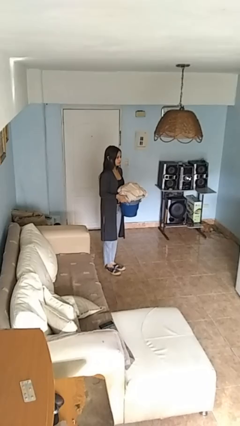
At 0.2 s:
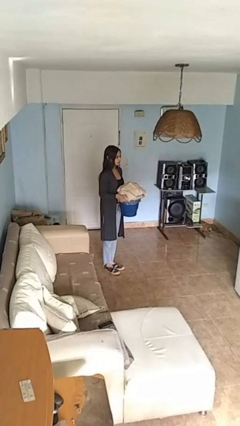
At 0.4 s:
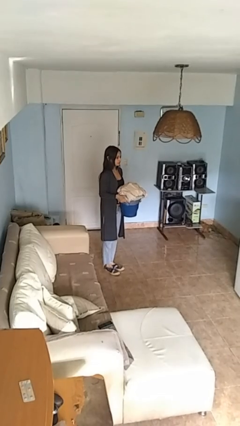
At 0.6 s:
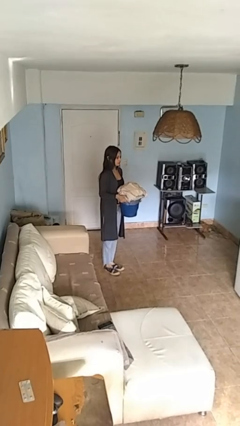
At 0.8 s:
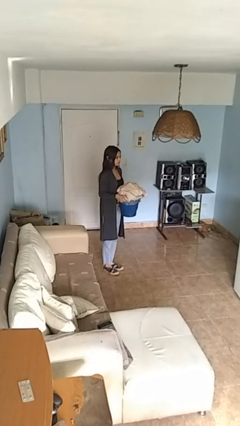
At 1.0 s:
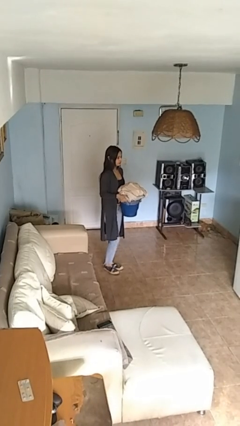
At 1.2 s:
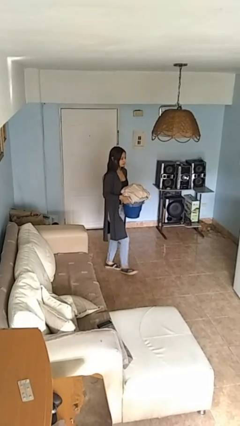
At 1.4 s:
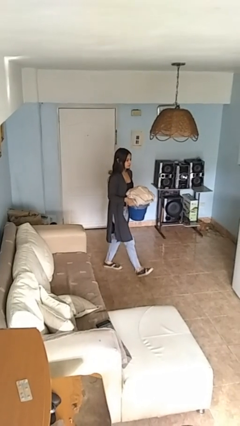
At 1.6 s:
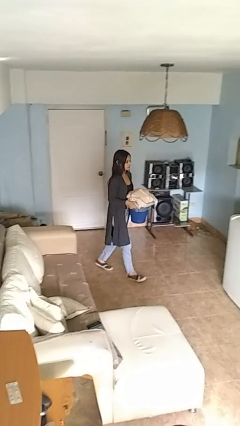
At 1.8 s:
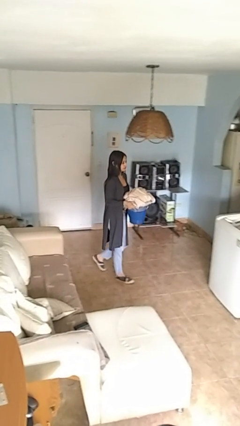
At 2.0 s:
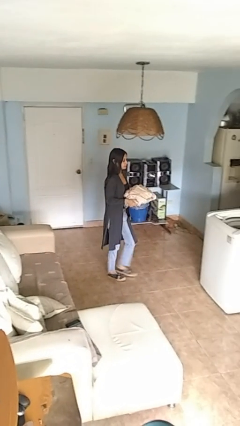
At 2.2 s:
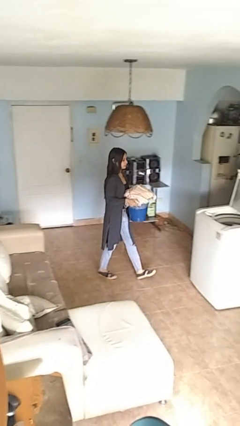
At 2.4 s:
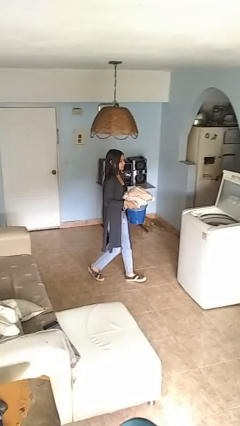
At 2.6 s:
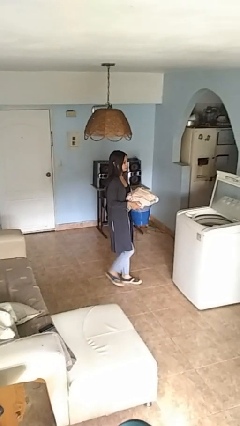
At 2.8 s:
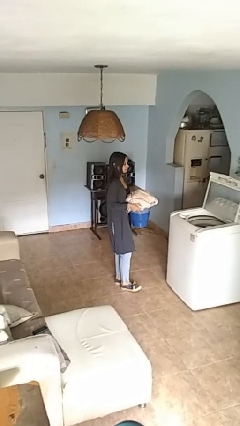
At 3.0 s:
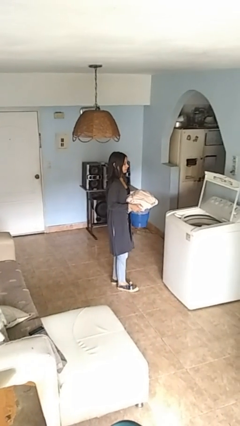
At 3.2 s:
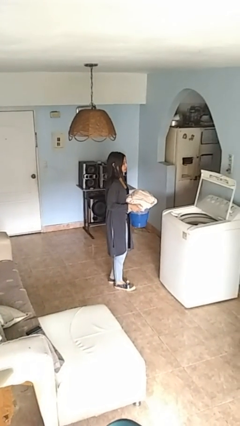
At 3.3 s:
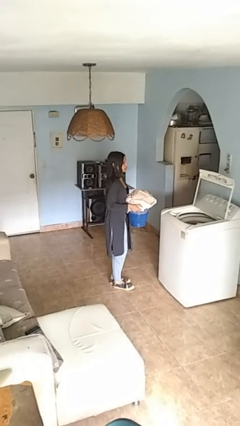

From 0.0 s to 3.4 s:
person carries laundry basket

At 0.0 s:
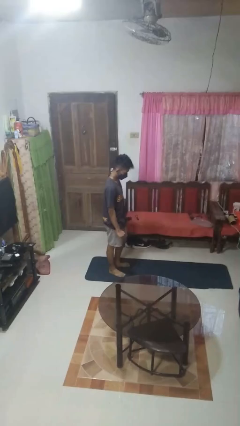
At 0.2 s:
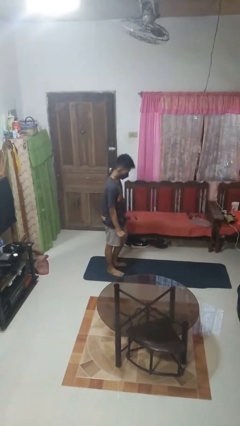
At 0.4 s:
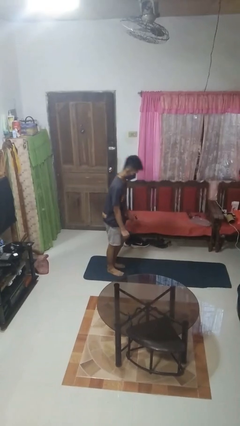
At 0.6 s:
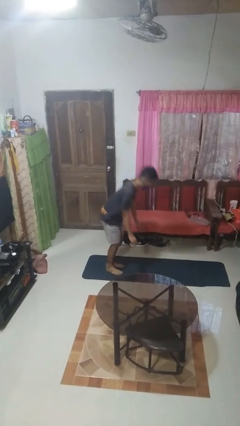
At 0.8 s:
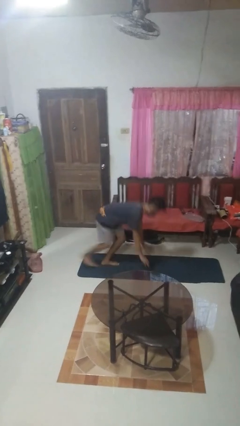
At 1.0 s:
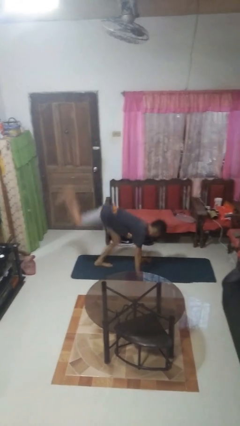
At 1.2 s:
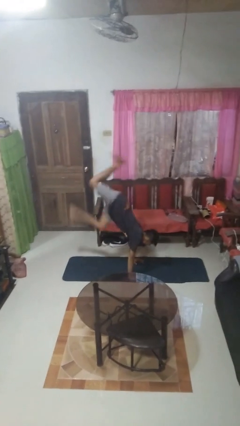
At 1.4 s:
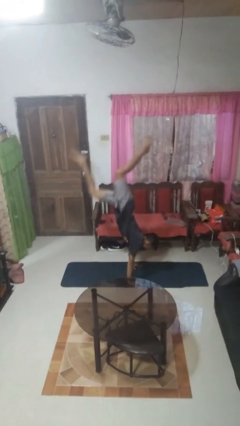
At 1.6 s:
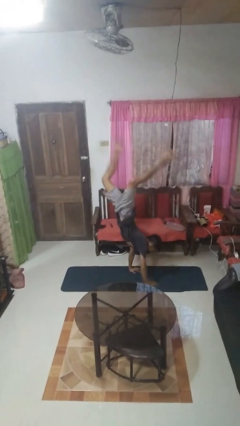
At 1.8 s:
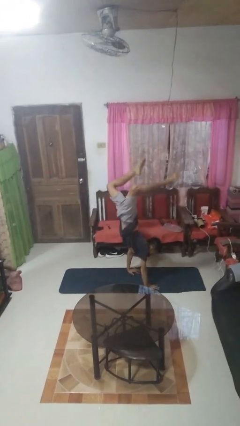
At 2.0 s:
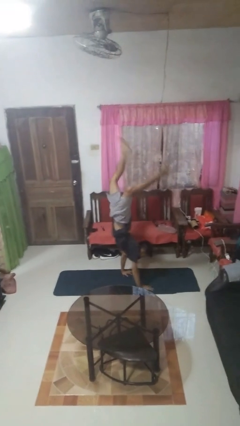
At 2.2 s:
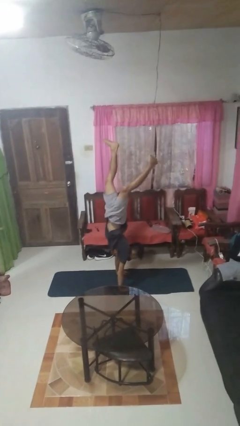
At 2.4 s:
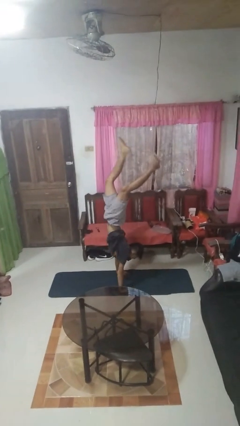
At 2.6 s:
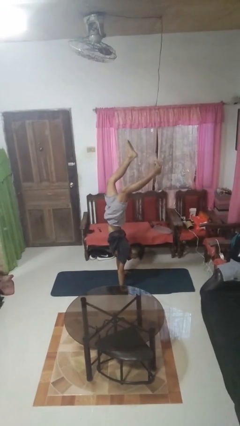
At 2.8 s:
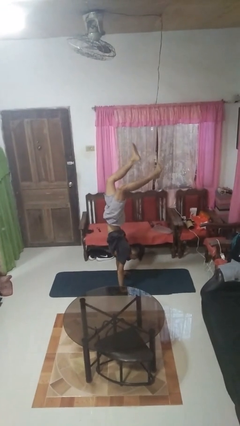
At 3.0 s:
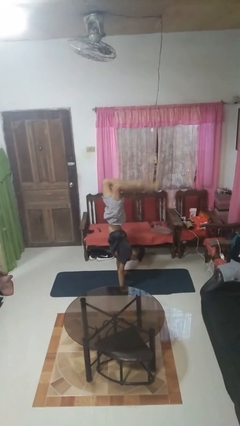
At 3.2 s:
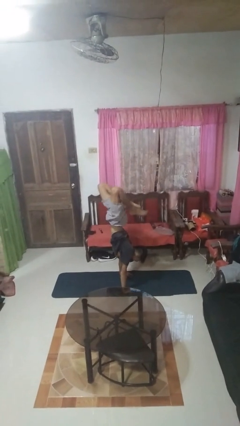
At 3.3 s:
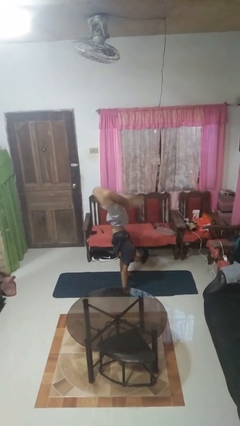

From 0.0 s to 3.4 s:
person handstand

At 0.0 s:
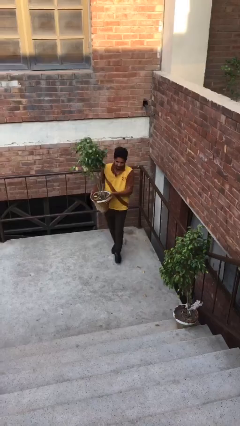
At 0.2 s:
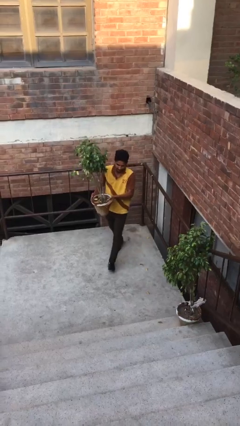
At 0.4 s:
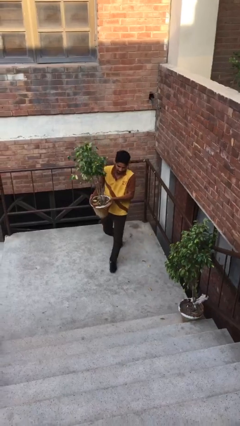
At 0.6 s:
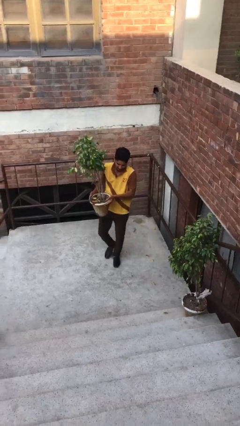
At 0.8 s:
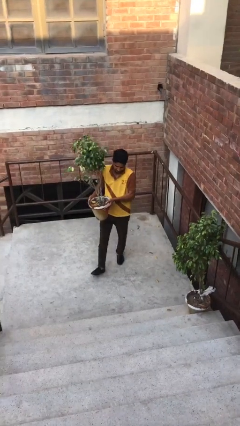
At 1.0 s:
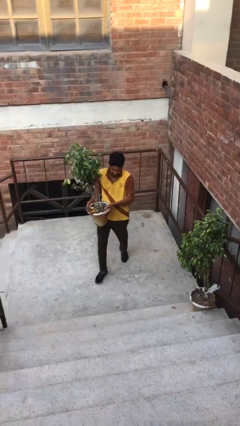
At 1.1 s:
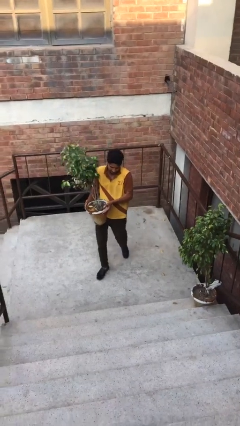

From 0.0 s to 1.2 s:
person carries heavy object

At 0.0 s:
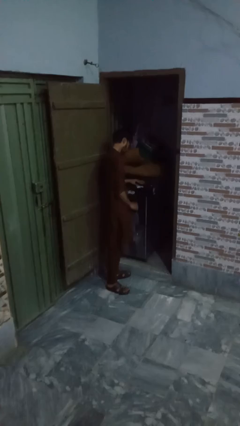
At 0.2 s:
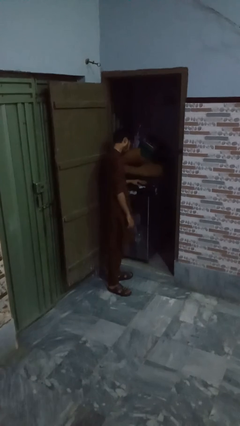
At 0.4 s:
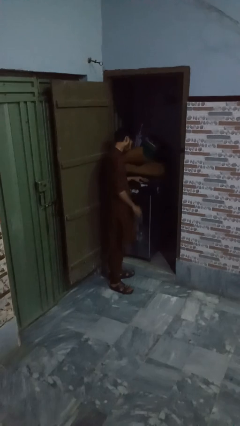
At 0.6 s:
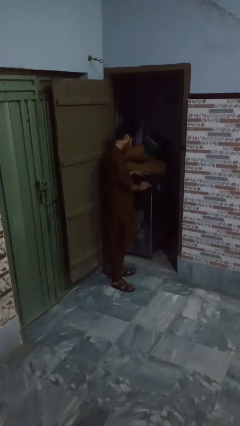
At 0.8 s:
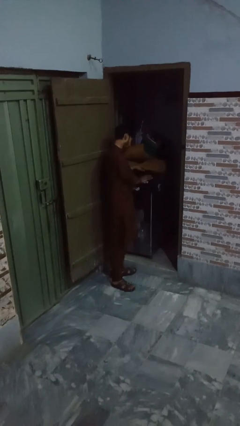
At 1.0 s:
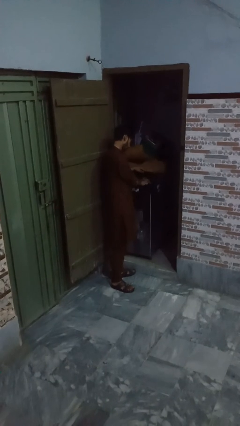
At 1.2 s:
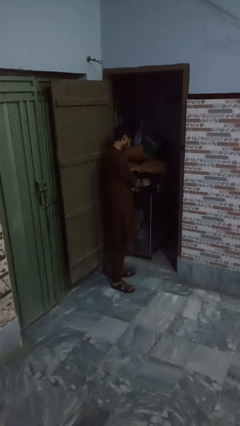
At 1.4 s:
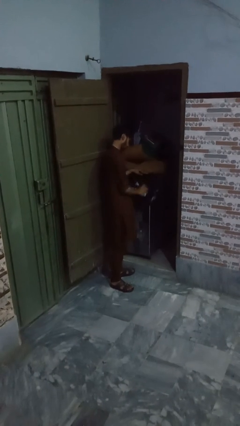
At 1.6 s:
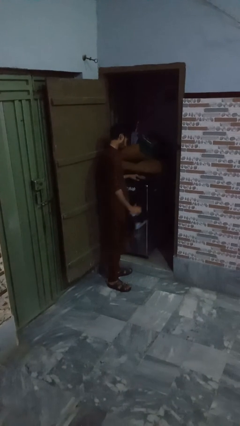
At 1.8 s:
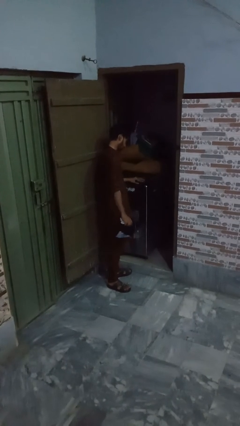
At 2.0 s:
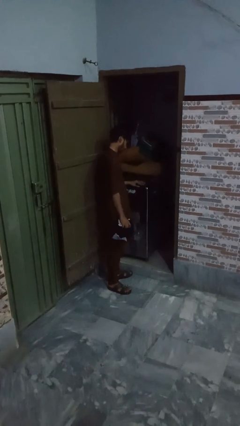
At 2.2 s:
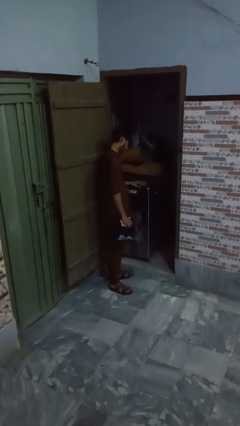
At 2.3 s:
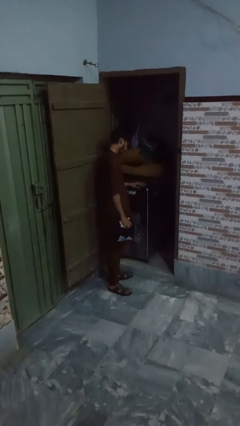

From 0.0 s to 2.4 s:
person unloads dryer

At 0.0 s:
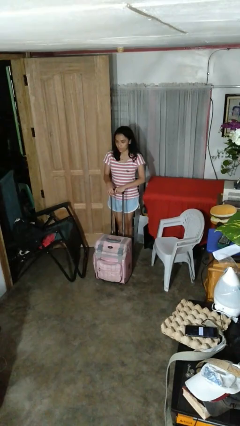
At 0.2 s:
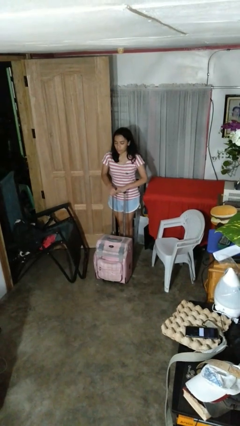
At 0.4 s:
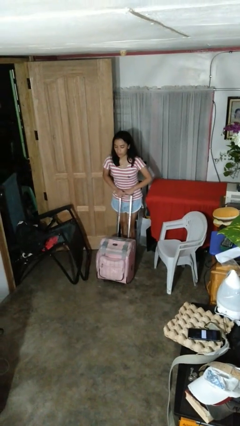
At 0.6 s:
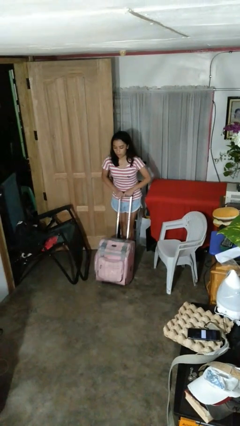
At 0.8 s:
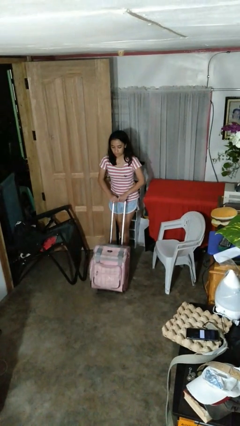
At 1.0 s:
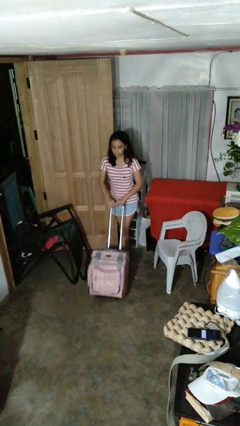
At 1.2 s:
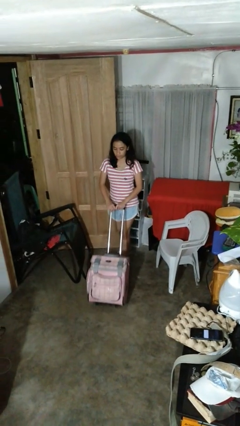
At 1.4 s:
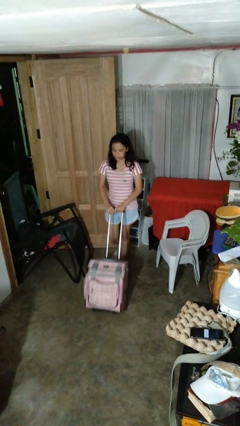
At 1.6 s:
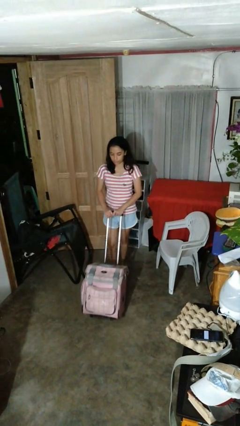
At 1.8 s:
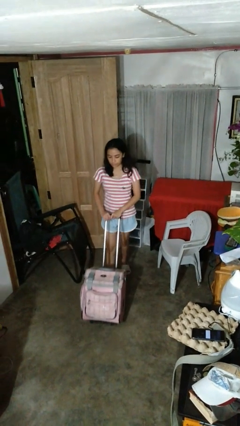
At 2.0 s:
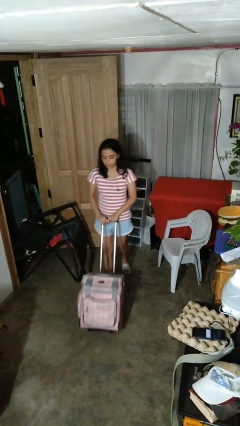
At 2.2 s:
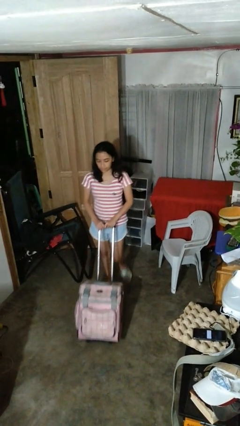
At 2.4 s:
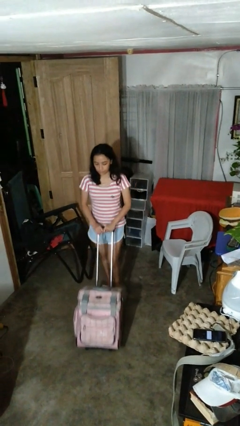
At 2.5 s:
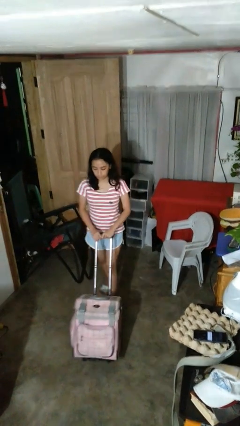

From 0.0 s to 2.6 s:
person pushes wheeled cart

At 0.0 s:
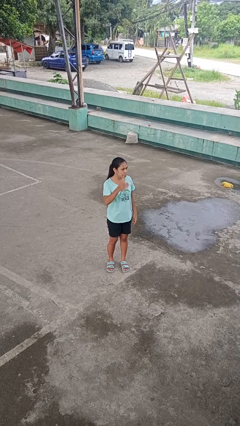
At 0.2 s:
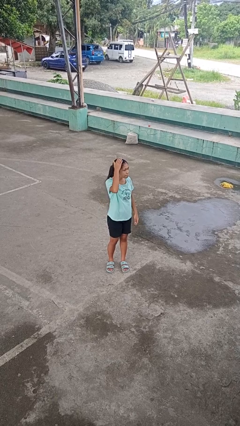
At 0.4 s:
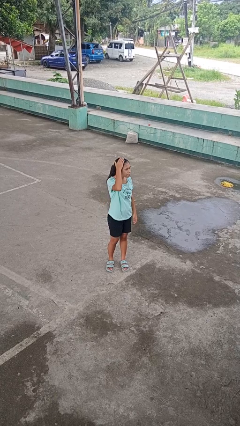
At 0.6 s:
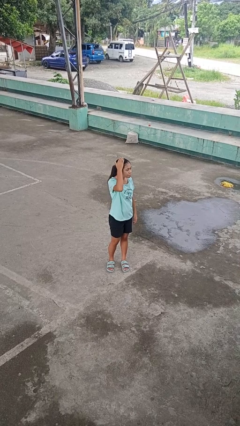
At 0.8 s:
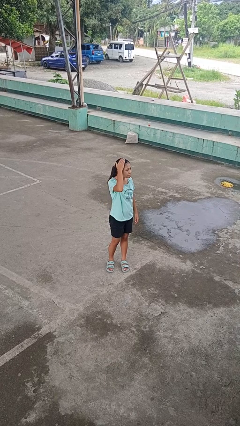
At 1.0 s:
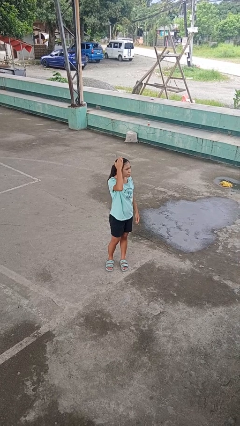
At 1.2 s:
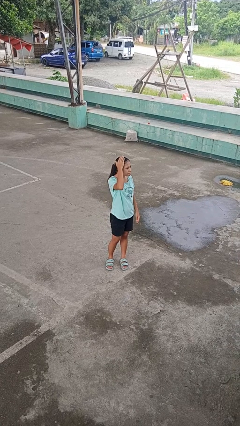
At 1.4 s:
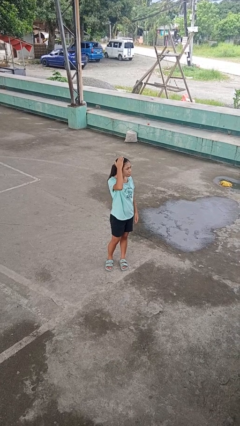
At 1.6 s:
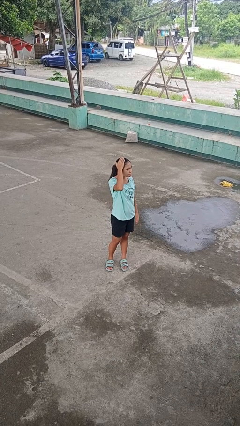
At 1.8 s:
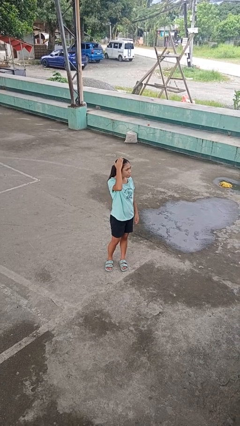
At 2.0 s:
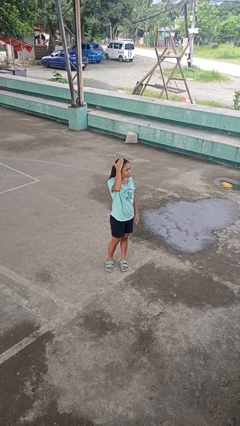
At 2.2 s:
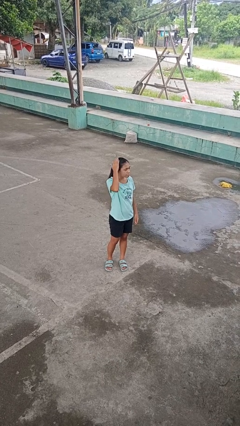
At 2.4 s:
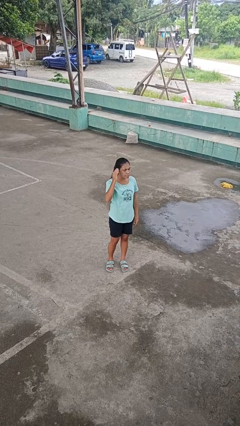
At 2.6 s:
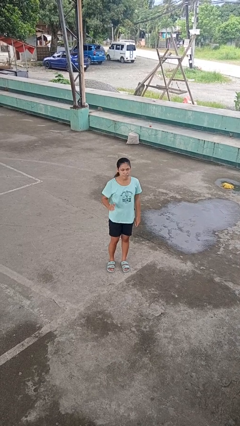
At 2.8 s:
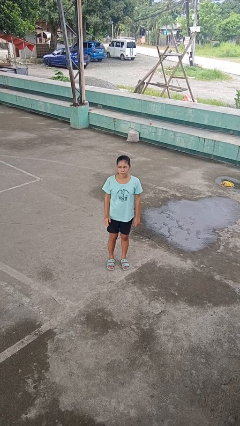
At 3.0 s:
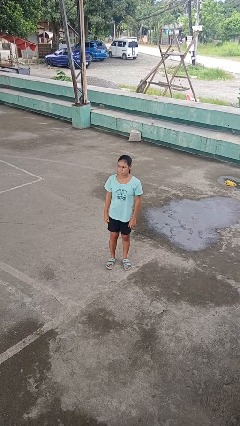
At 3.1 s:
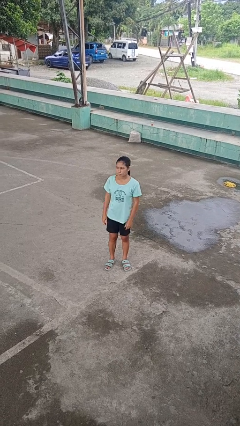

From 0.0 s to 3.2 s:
person pats head

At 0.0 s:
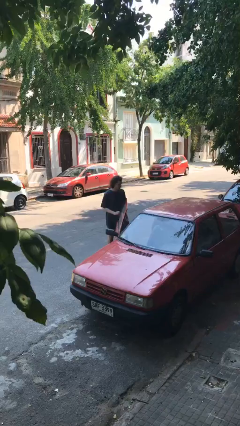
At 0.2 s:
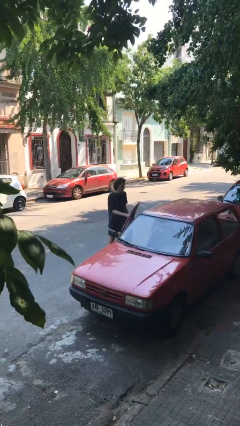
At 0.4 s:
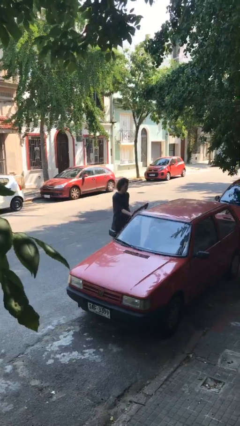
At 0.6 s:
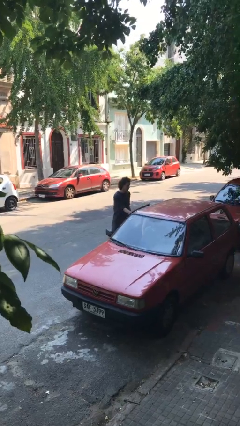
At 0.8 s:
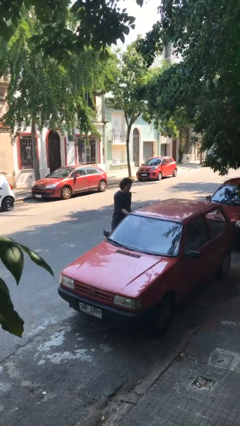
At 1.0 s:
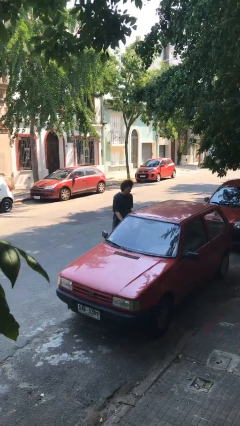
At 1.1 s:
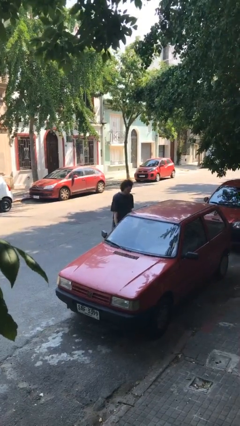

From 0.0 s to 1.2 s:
person closes car door

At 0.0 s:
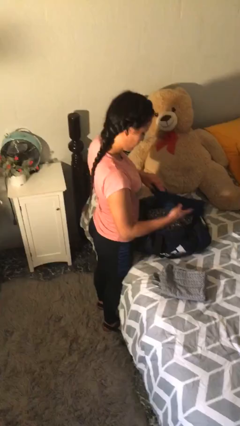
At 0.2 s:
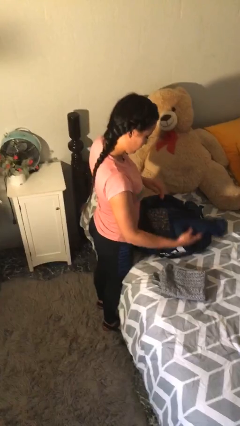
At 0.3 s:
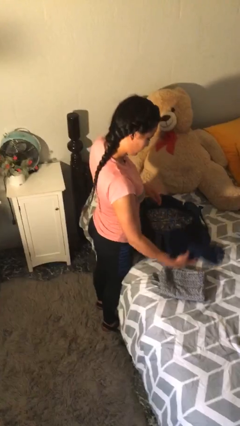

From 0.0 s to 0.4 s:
person unloads clothes from suitcase
